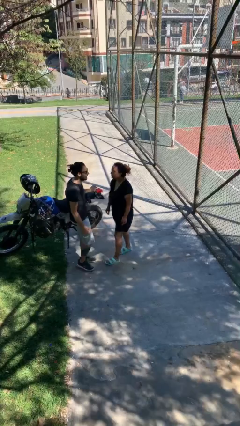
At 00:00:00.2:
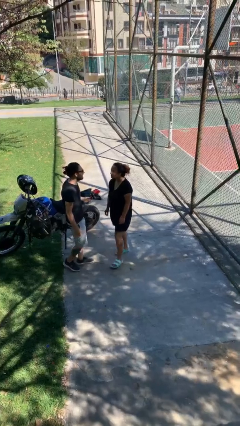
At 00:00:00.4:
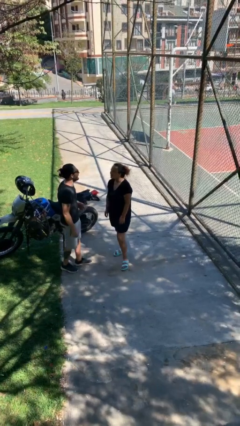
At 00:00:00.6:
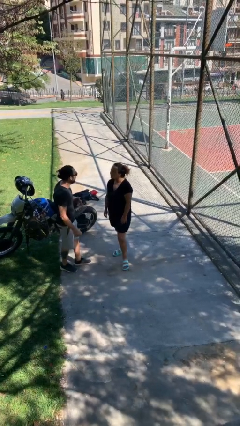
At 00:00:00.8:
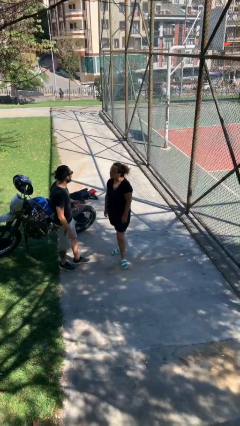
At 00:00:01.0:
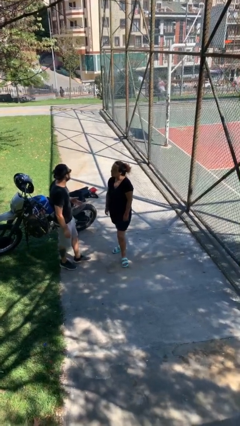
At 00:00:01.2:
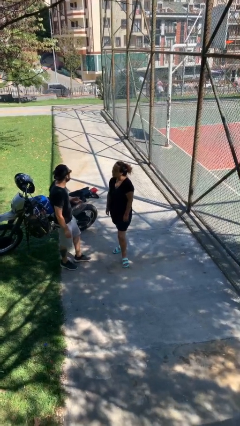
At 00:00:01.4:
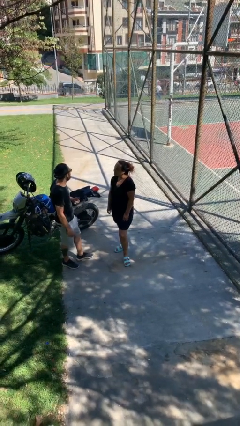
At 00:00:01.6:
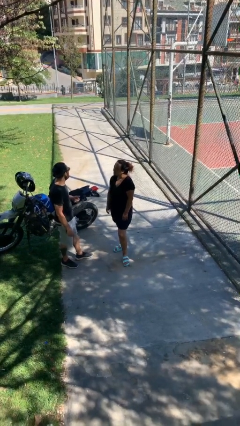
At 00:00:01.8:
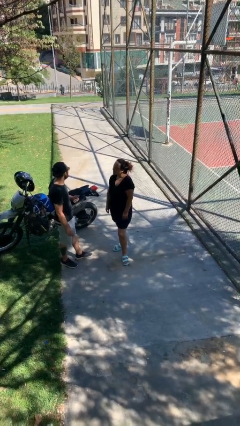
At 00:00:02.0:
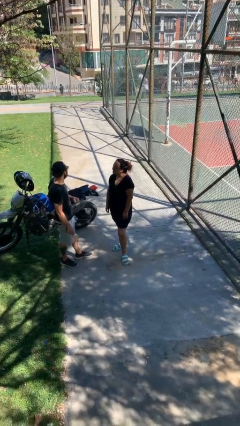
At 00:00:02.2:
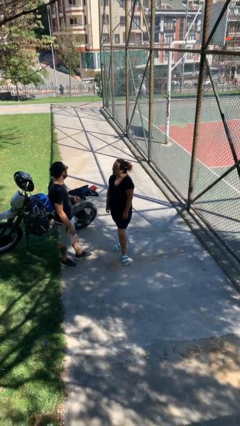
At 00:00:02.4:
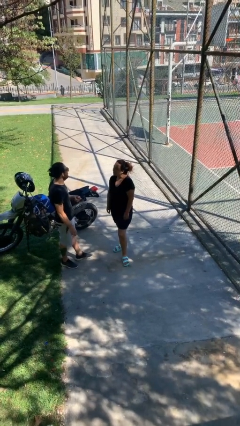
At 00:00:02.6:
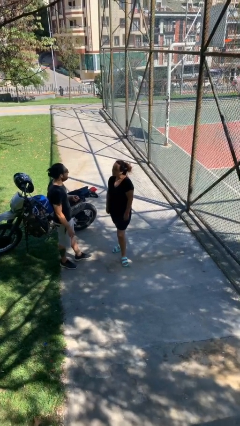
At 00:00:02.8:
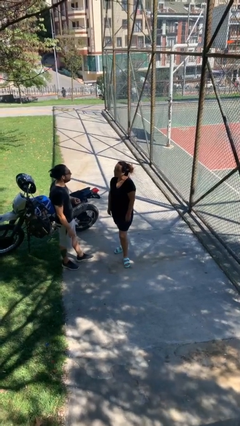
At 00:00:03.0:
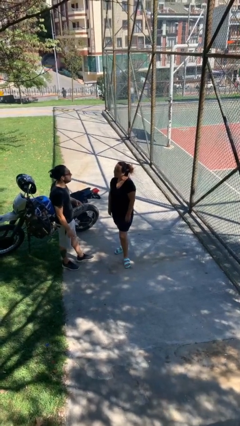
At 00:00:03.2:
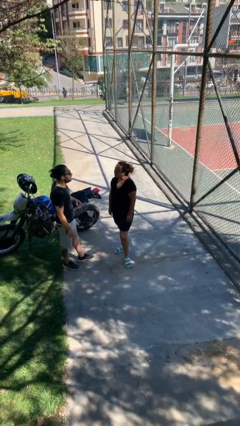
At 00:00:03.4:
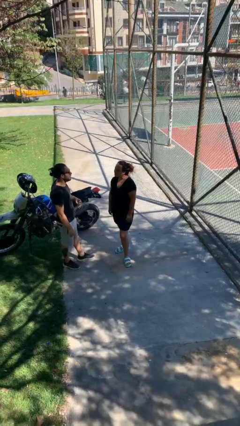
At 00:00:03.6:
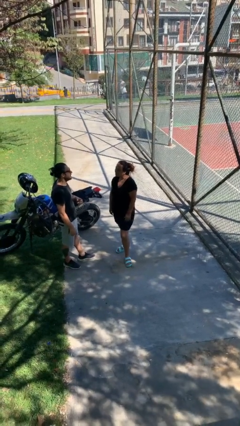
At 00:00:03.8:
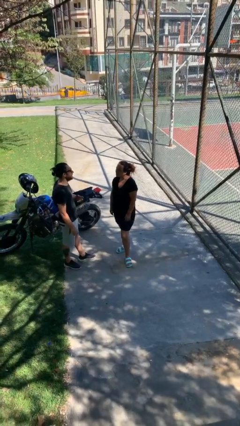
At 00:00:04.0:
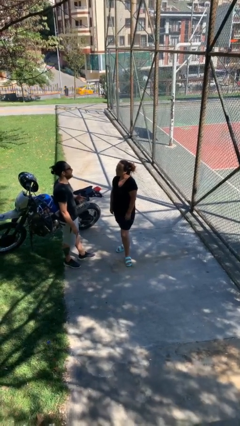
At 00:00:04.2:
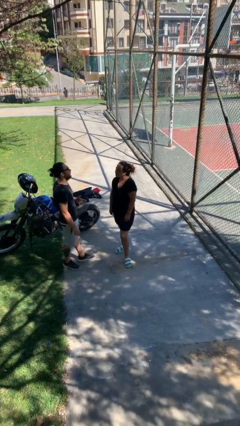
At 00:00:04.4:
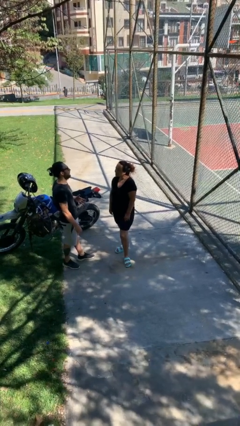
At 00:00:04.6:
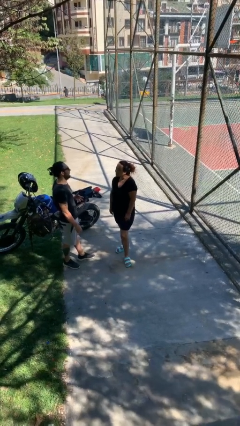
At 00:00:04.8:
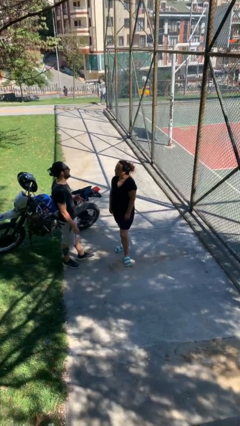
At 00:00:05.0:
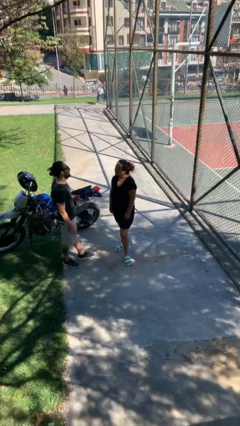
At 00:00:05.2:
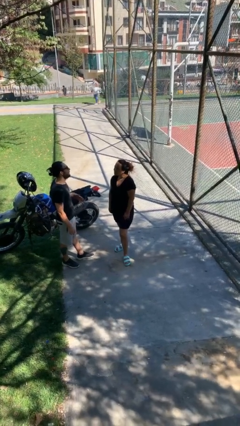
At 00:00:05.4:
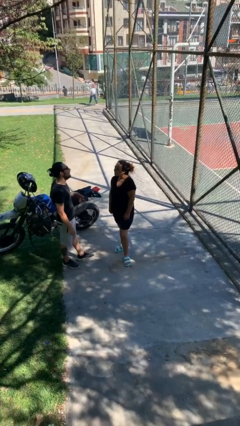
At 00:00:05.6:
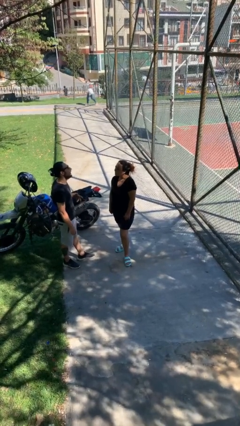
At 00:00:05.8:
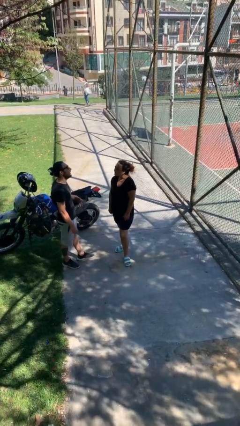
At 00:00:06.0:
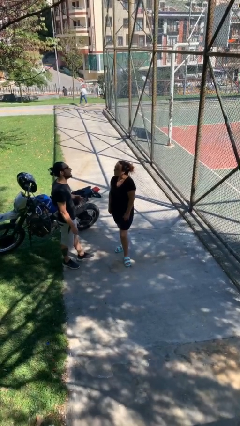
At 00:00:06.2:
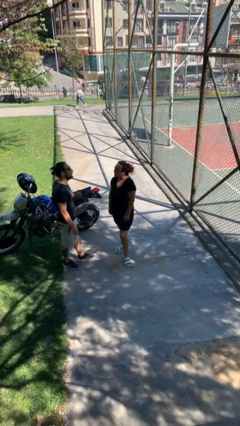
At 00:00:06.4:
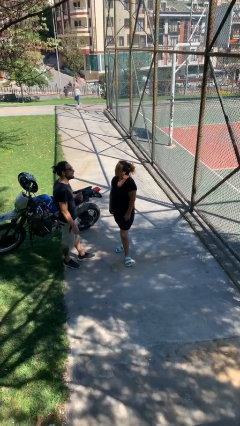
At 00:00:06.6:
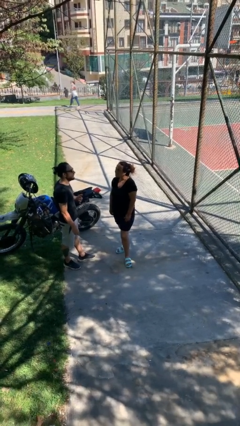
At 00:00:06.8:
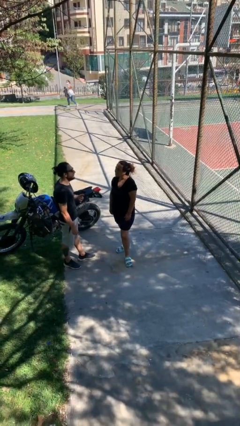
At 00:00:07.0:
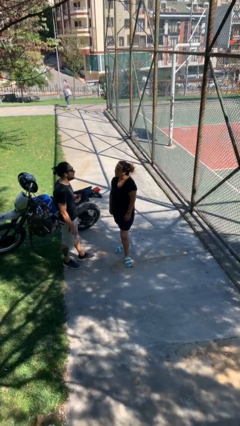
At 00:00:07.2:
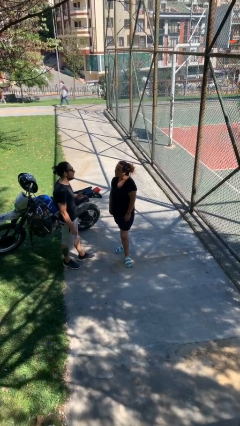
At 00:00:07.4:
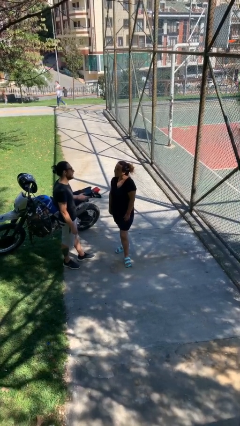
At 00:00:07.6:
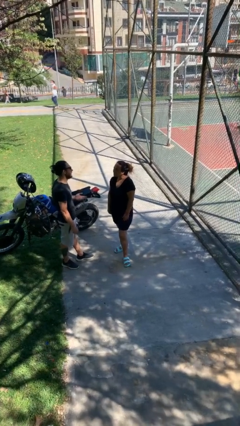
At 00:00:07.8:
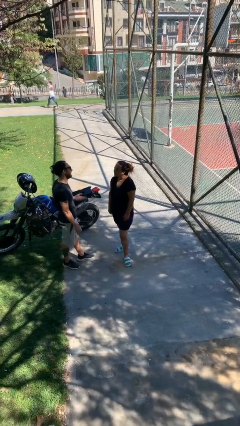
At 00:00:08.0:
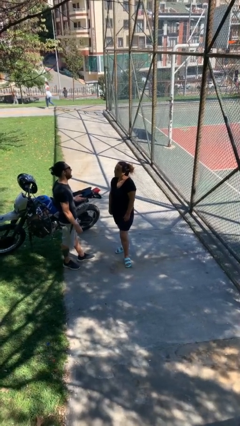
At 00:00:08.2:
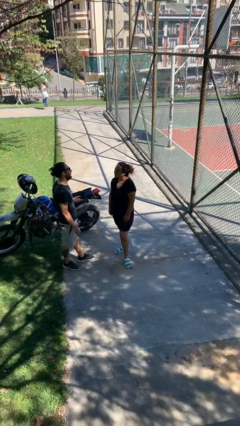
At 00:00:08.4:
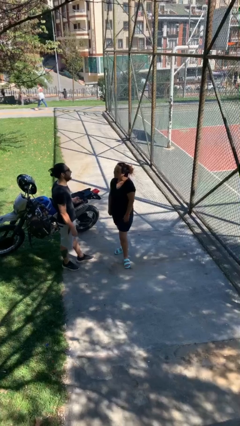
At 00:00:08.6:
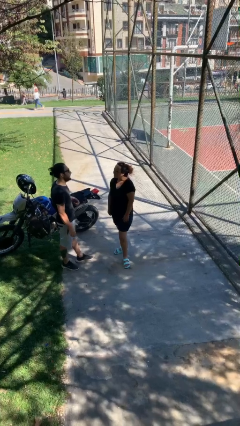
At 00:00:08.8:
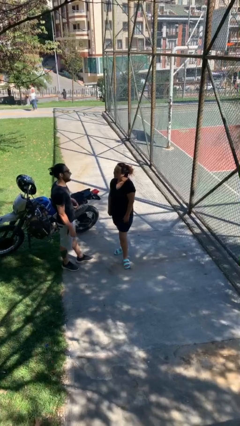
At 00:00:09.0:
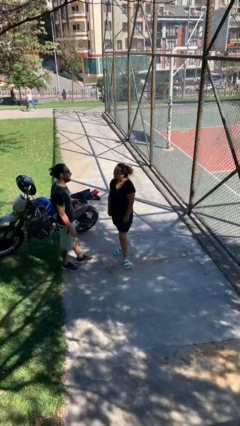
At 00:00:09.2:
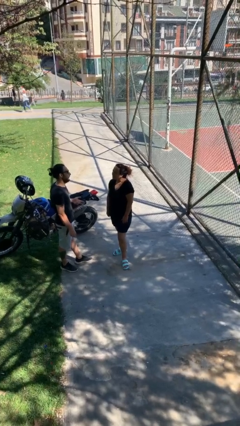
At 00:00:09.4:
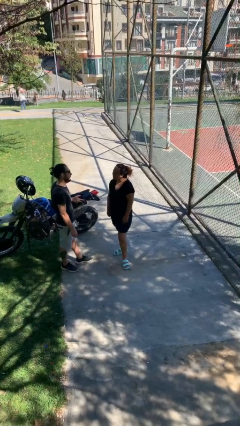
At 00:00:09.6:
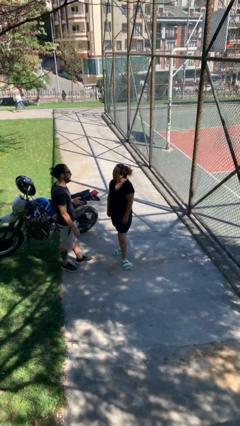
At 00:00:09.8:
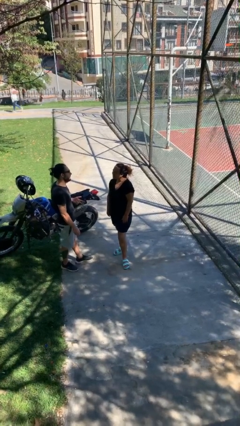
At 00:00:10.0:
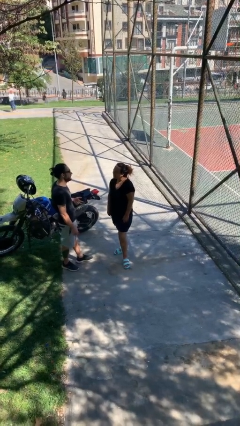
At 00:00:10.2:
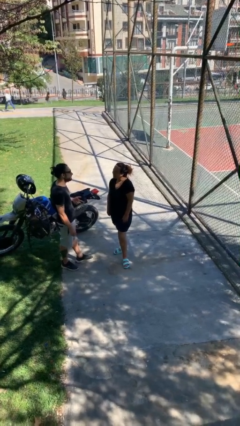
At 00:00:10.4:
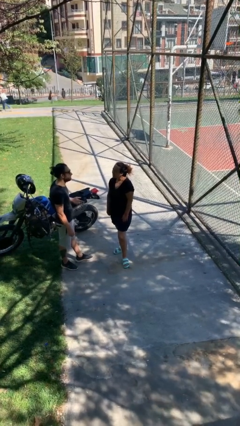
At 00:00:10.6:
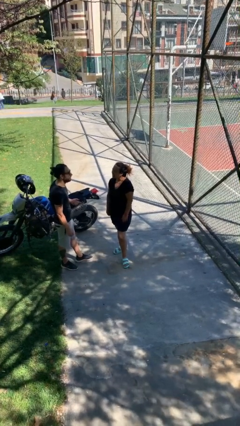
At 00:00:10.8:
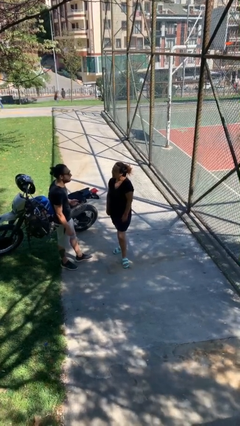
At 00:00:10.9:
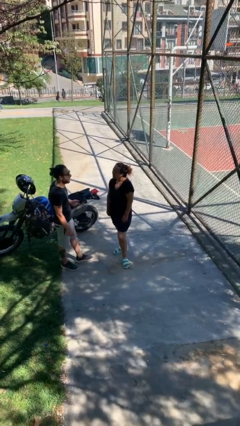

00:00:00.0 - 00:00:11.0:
person talks to person

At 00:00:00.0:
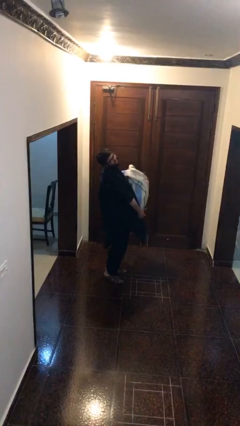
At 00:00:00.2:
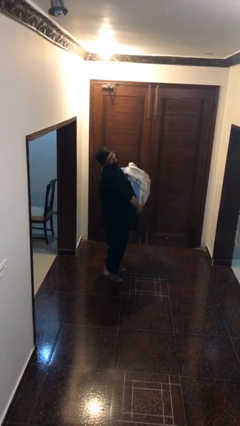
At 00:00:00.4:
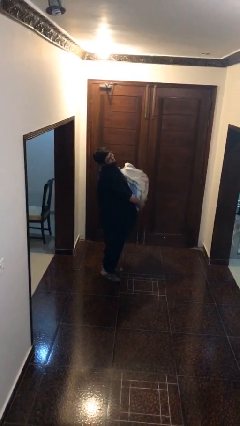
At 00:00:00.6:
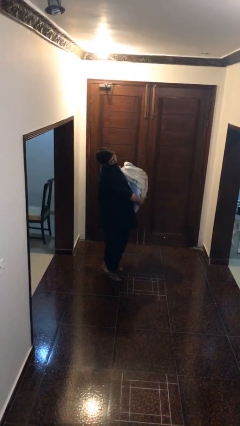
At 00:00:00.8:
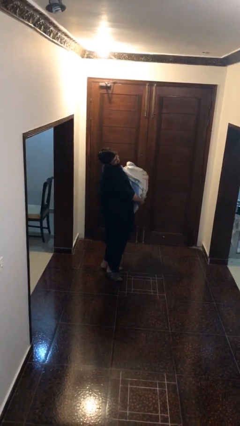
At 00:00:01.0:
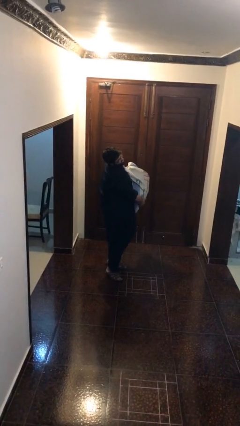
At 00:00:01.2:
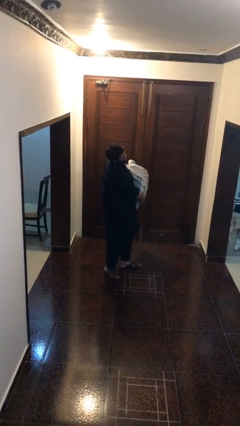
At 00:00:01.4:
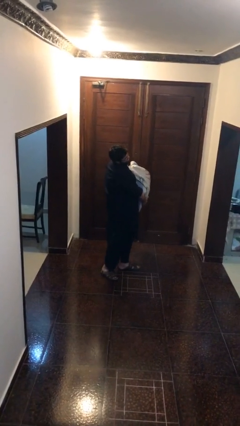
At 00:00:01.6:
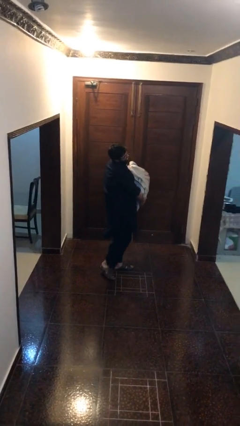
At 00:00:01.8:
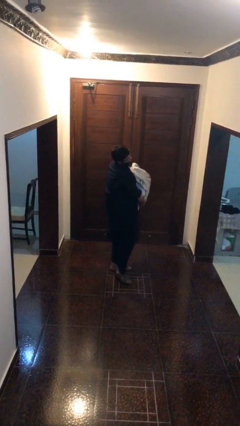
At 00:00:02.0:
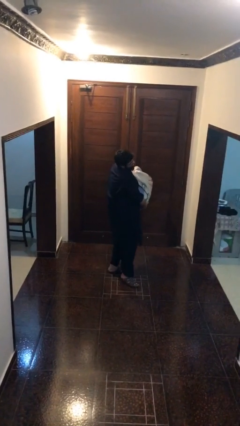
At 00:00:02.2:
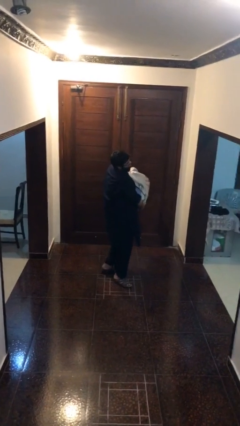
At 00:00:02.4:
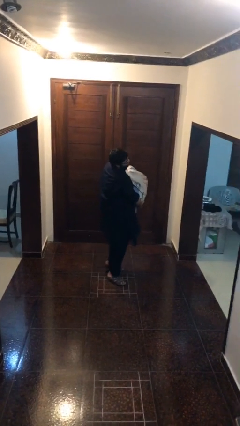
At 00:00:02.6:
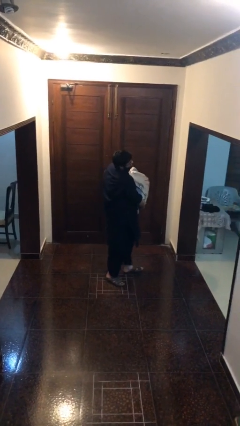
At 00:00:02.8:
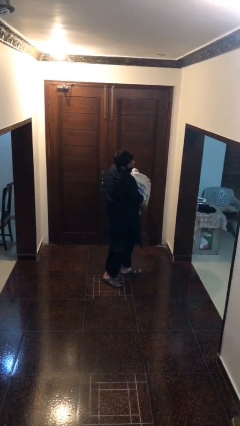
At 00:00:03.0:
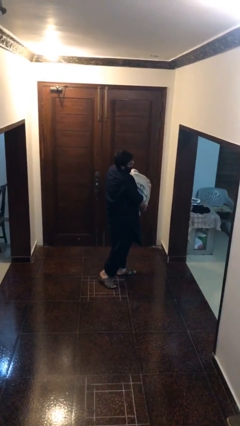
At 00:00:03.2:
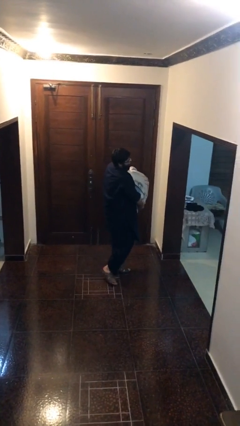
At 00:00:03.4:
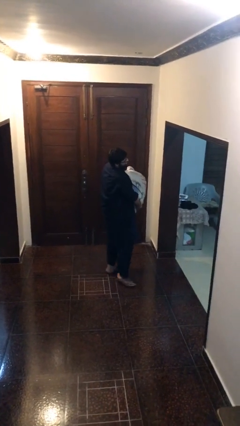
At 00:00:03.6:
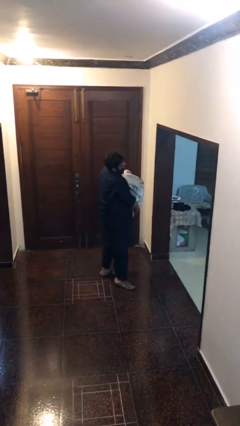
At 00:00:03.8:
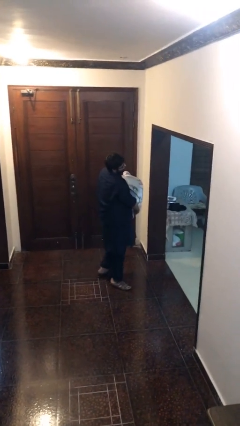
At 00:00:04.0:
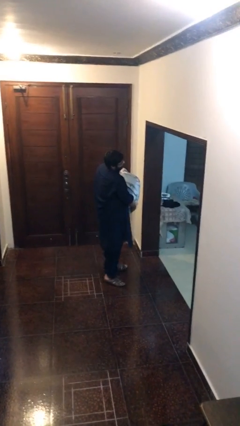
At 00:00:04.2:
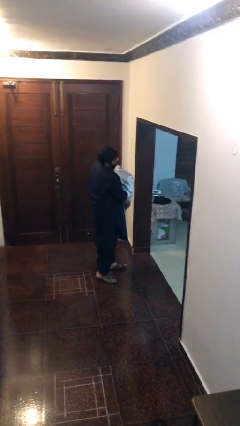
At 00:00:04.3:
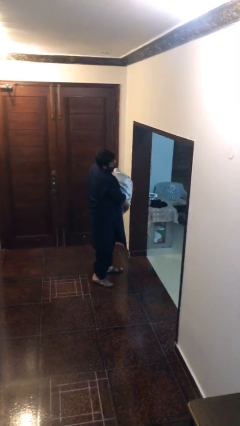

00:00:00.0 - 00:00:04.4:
person carries heavy object

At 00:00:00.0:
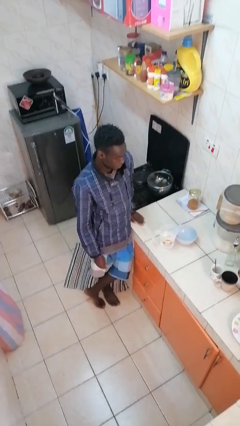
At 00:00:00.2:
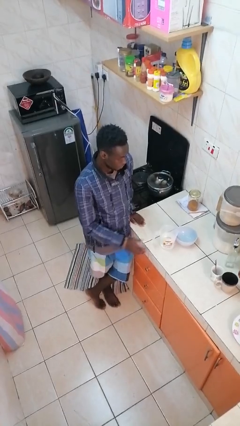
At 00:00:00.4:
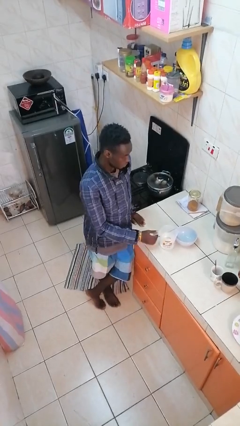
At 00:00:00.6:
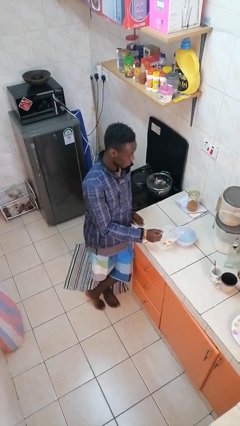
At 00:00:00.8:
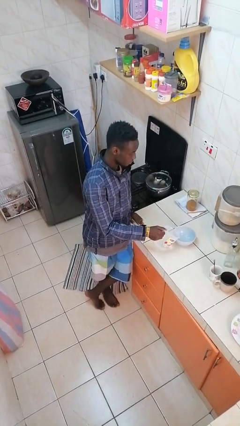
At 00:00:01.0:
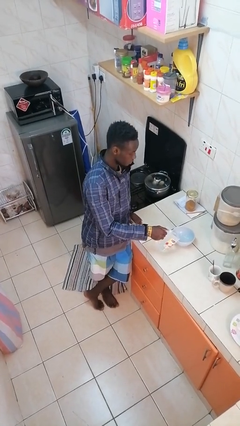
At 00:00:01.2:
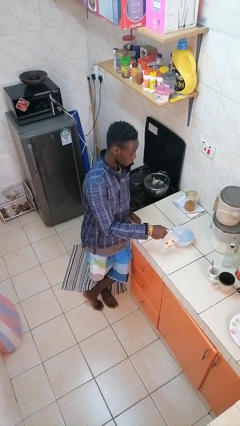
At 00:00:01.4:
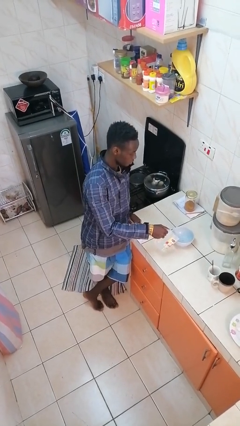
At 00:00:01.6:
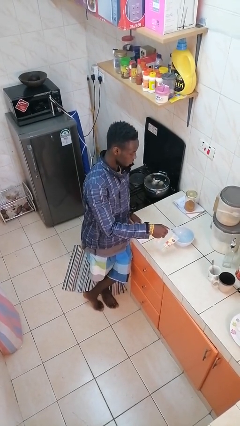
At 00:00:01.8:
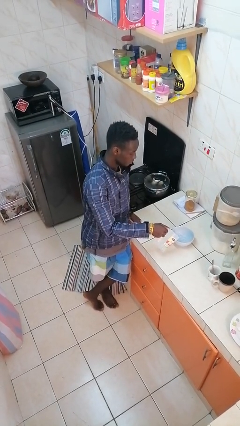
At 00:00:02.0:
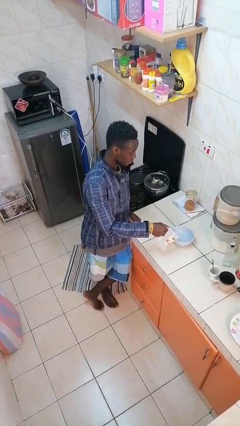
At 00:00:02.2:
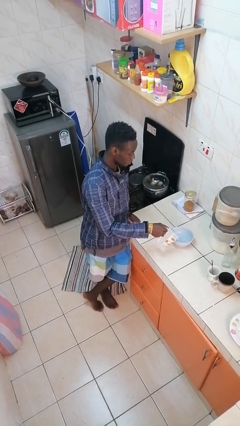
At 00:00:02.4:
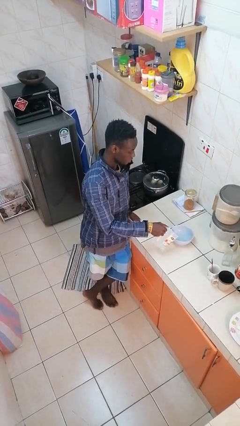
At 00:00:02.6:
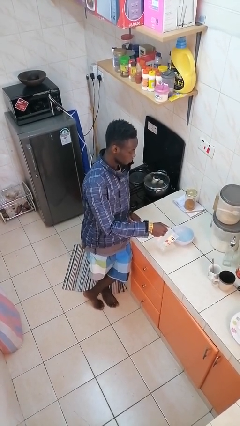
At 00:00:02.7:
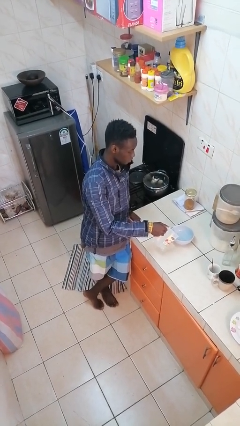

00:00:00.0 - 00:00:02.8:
person pours into bowl
